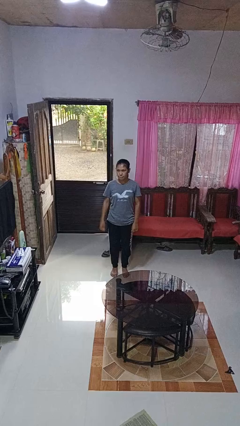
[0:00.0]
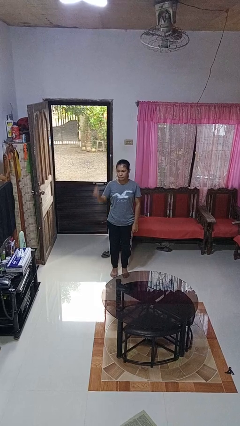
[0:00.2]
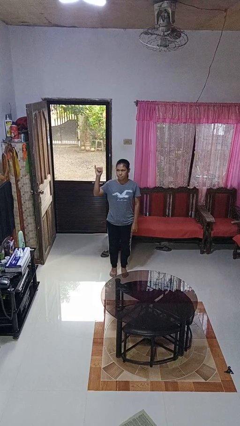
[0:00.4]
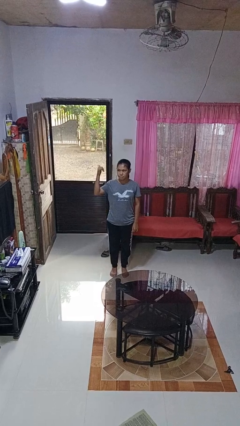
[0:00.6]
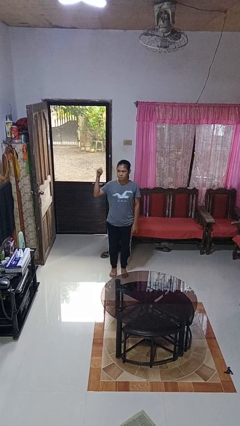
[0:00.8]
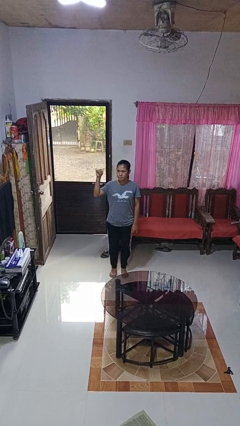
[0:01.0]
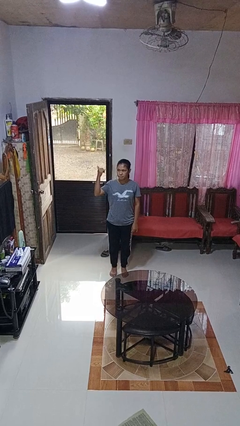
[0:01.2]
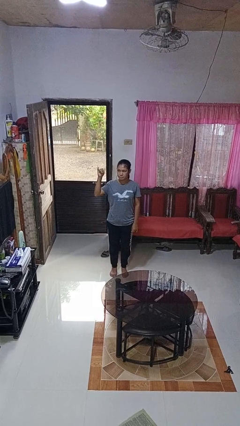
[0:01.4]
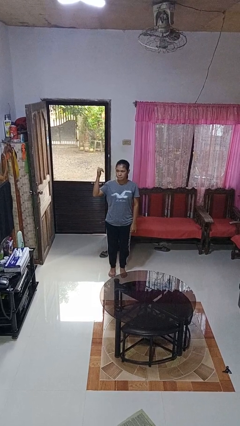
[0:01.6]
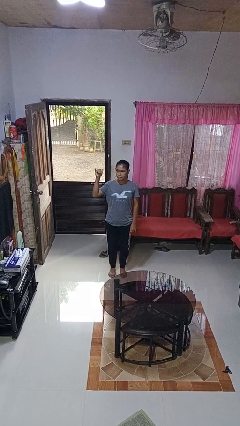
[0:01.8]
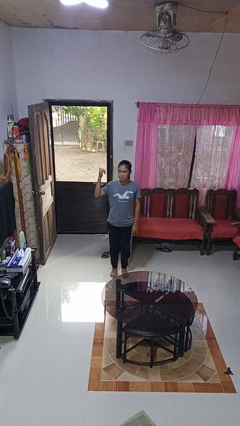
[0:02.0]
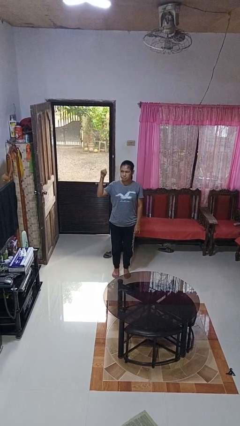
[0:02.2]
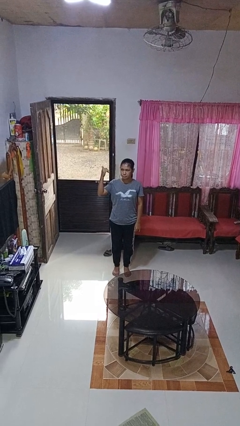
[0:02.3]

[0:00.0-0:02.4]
person gestures hang loose

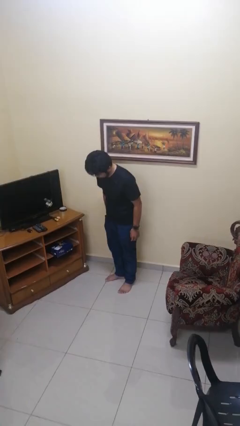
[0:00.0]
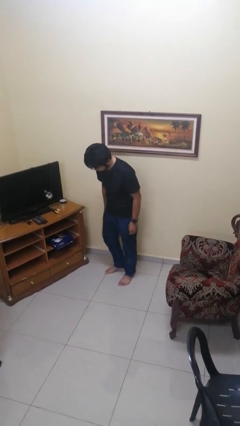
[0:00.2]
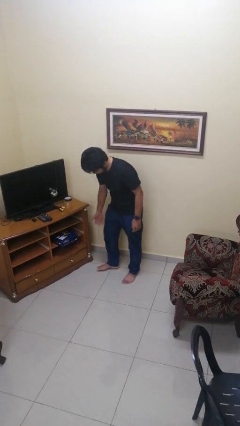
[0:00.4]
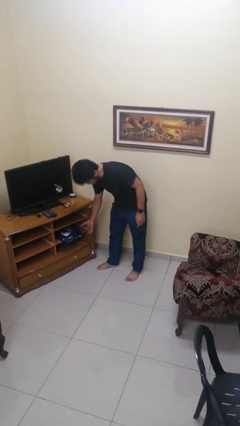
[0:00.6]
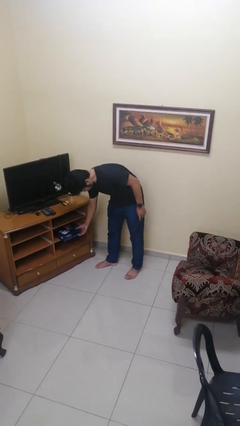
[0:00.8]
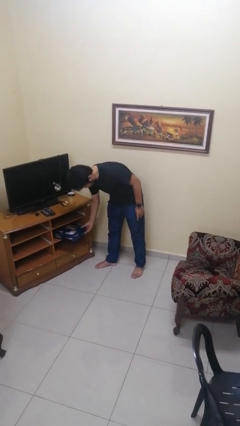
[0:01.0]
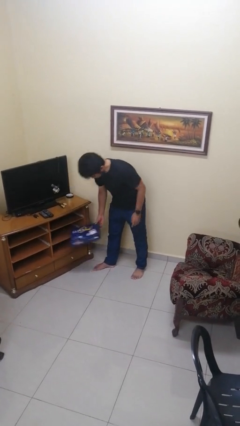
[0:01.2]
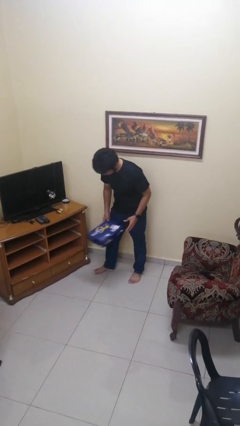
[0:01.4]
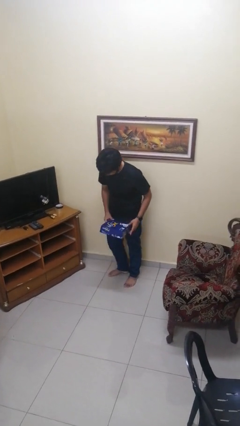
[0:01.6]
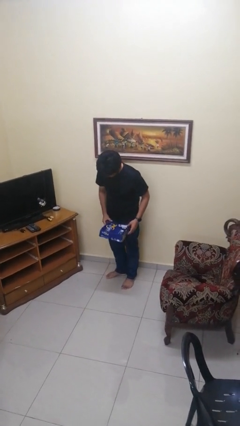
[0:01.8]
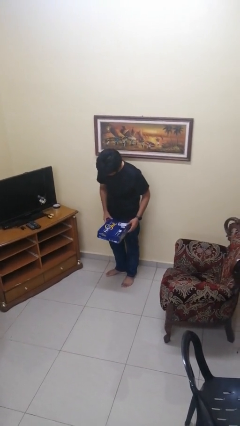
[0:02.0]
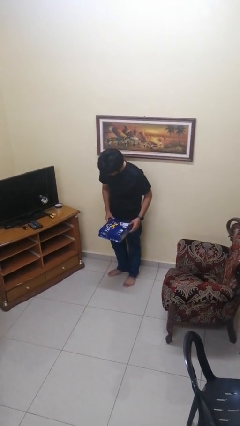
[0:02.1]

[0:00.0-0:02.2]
person picks up object from cabinet

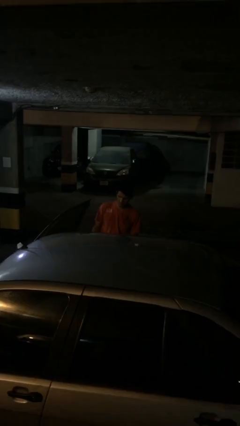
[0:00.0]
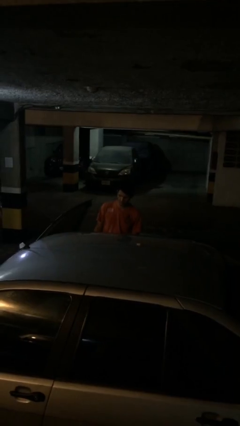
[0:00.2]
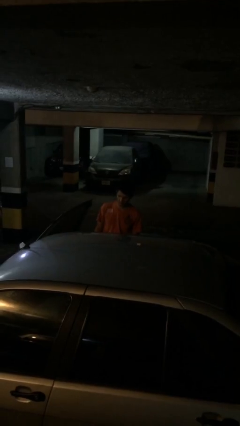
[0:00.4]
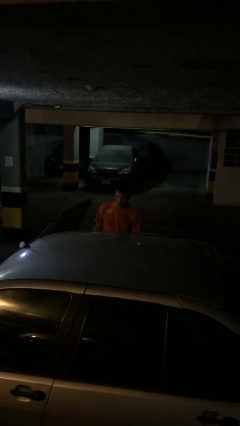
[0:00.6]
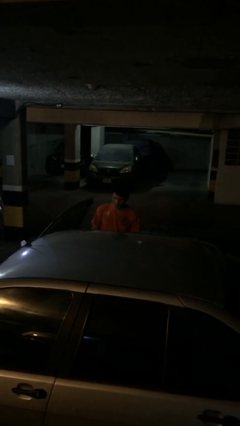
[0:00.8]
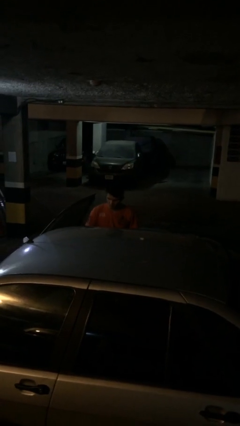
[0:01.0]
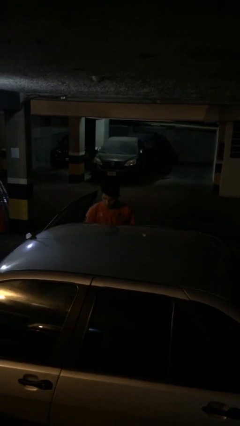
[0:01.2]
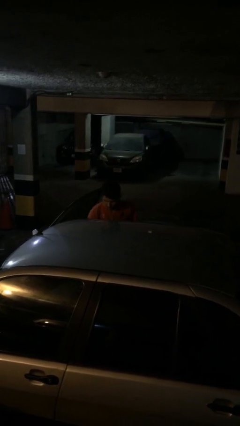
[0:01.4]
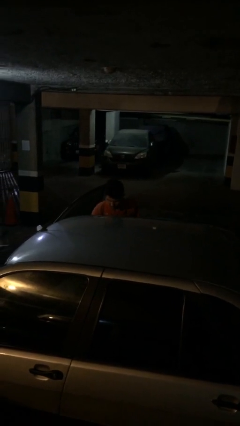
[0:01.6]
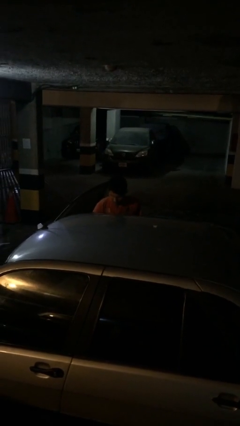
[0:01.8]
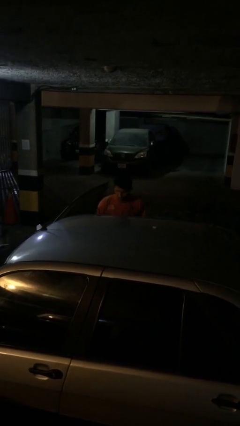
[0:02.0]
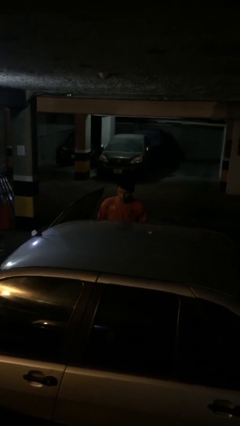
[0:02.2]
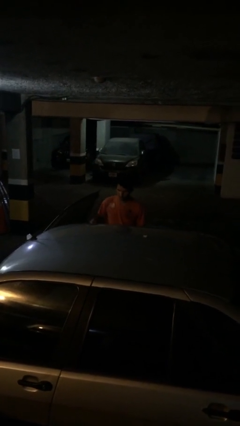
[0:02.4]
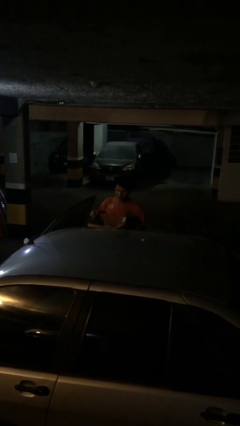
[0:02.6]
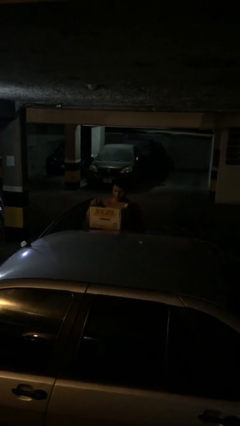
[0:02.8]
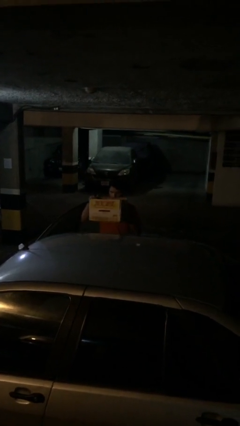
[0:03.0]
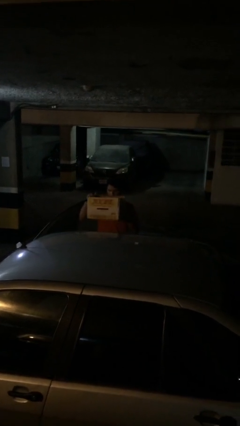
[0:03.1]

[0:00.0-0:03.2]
person unloads car

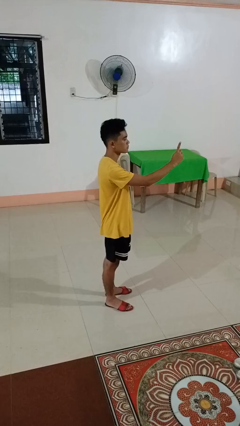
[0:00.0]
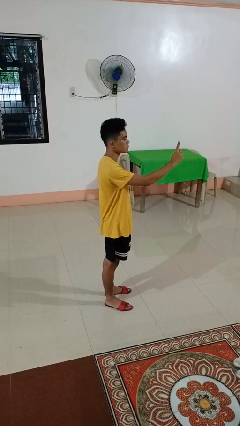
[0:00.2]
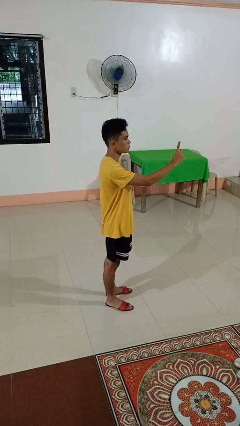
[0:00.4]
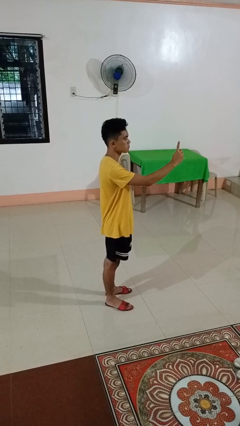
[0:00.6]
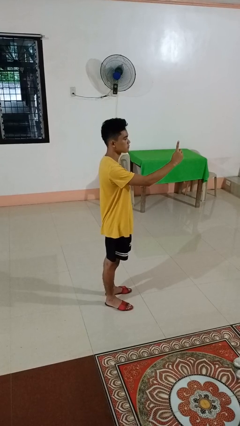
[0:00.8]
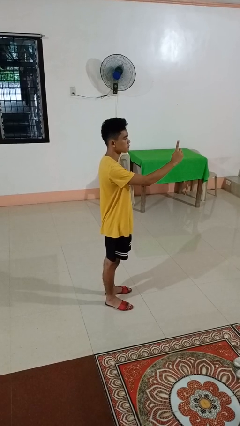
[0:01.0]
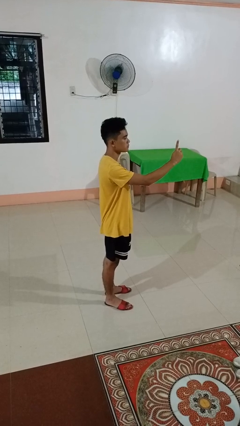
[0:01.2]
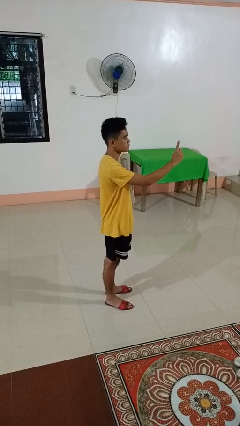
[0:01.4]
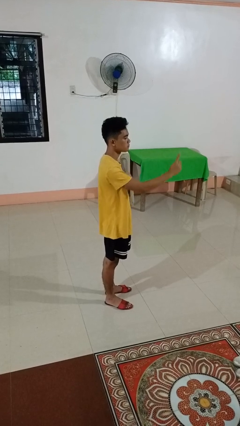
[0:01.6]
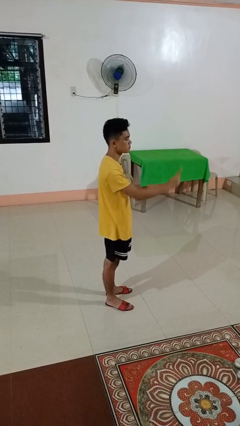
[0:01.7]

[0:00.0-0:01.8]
person gestures number one

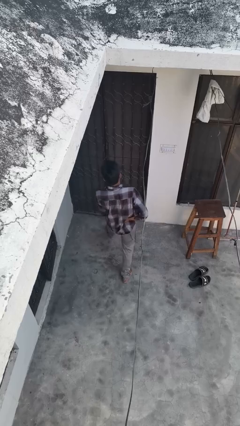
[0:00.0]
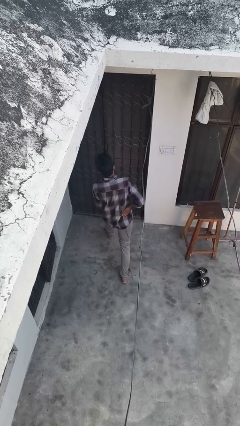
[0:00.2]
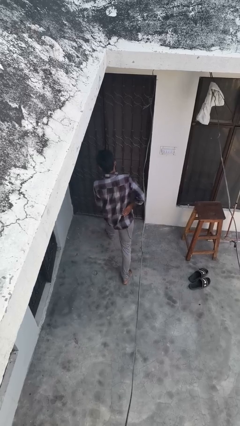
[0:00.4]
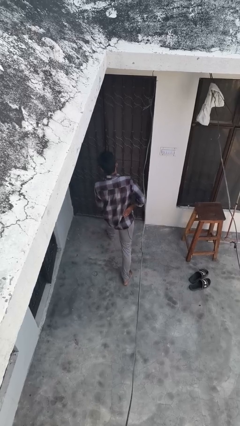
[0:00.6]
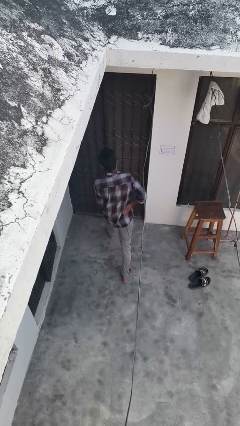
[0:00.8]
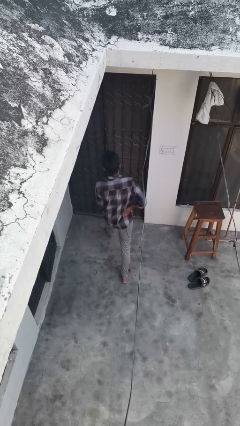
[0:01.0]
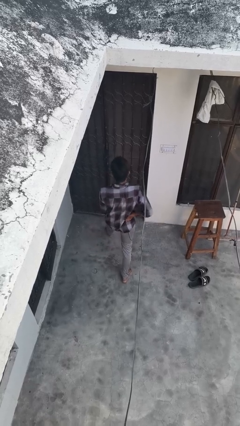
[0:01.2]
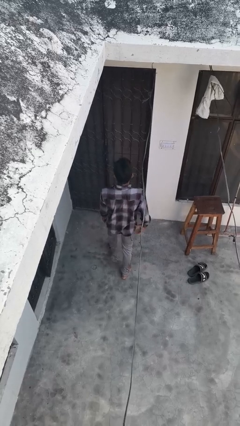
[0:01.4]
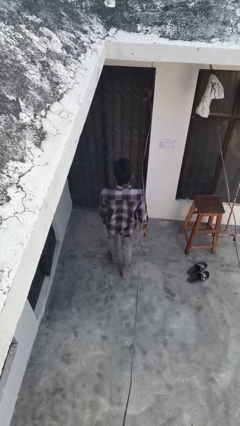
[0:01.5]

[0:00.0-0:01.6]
person exercises with lunges

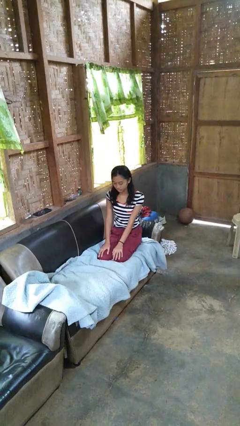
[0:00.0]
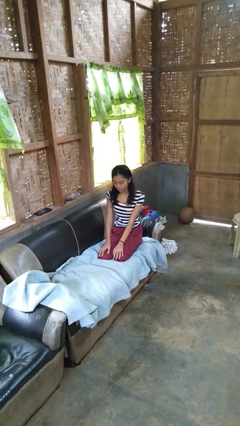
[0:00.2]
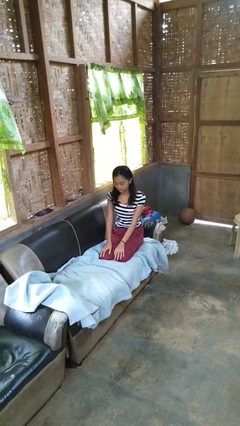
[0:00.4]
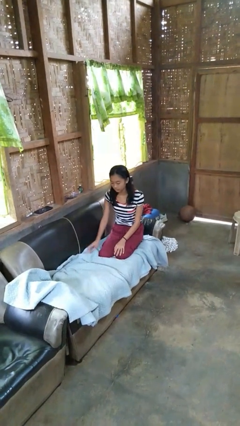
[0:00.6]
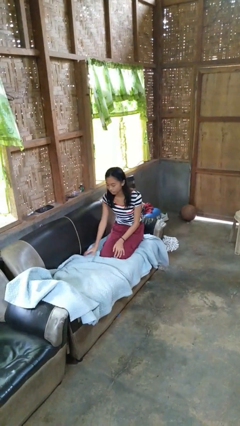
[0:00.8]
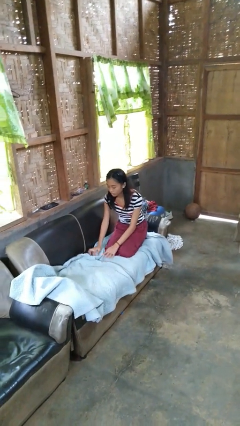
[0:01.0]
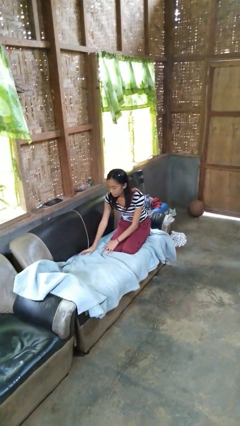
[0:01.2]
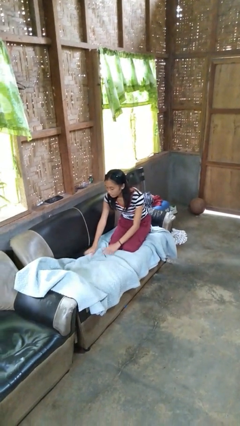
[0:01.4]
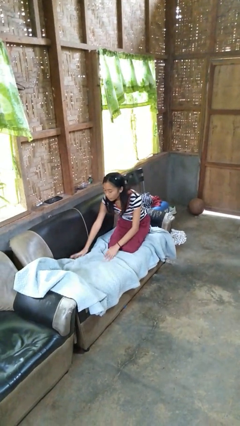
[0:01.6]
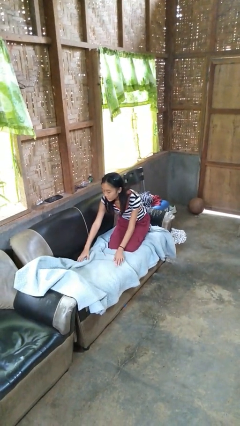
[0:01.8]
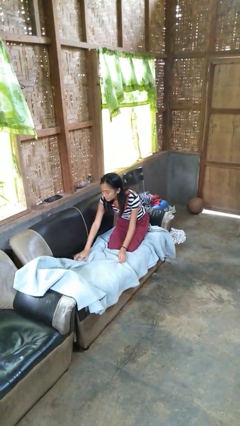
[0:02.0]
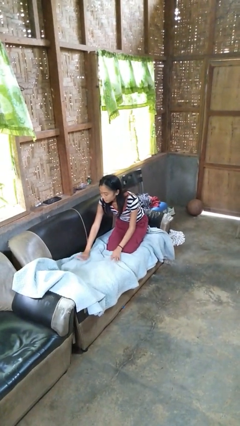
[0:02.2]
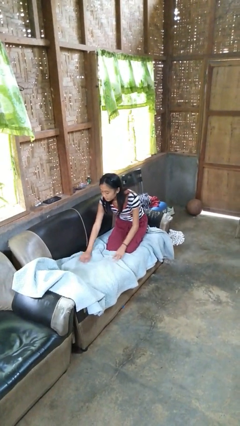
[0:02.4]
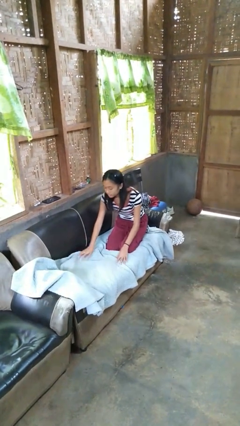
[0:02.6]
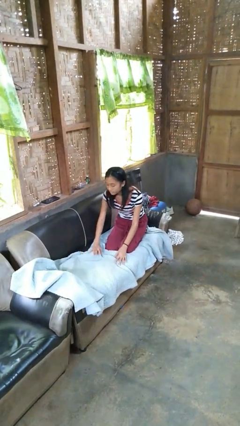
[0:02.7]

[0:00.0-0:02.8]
person searches in couch

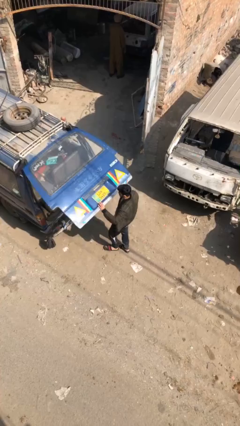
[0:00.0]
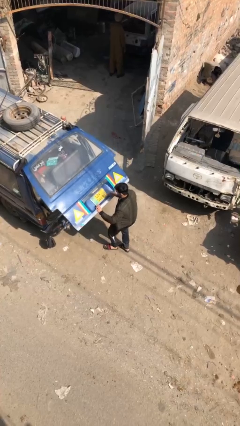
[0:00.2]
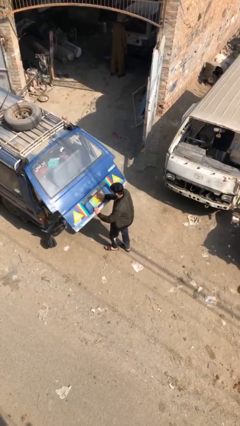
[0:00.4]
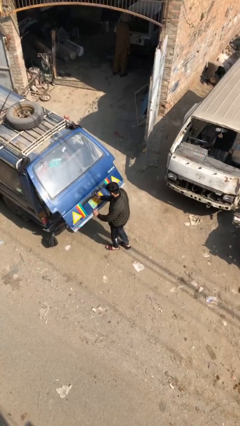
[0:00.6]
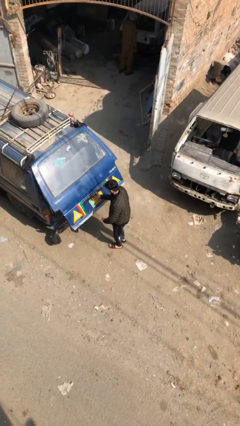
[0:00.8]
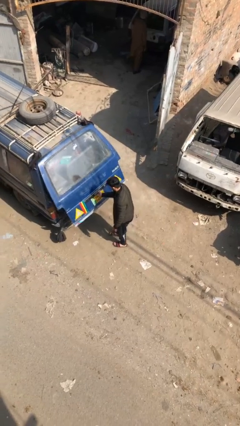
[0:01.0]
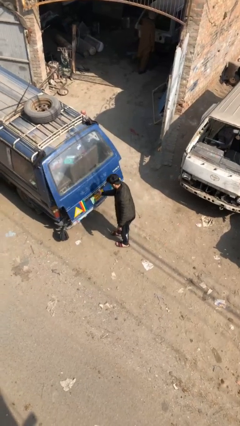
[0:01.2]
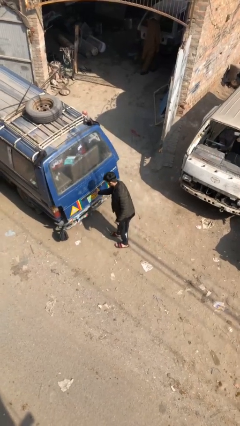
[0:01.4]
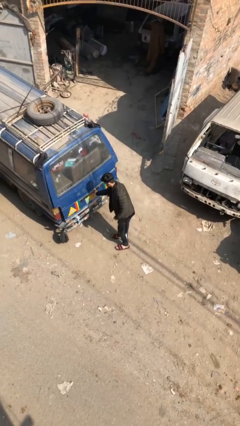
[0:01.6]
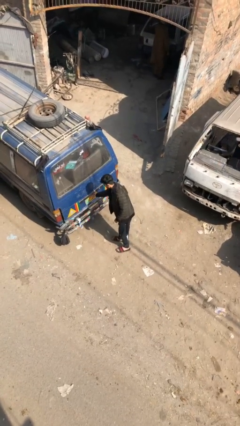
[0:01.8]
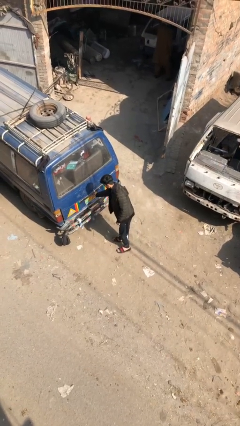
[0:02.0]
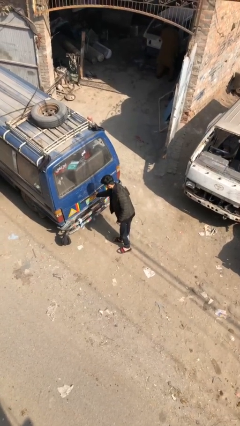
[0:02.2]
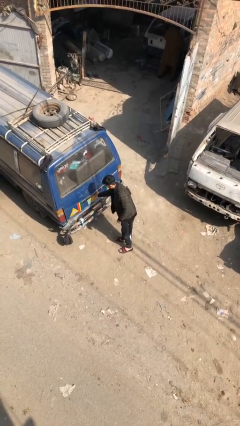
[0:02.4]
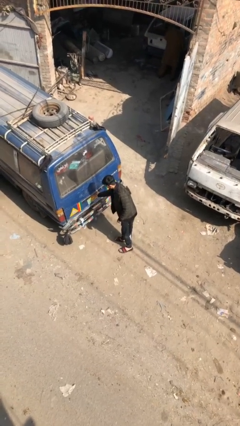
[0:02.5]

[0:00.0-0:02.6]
person closes car trunk
